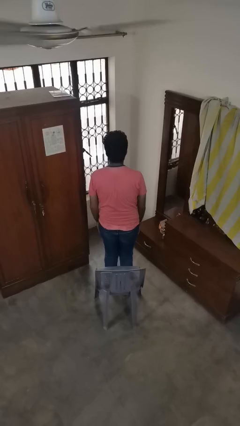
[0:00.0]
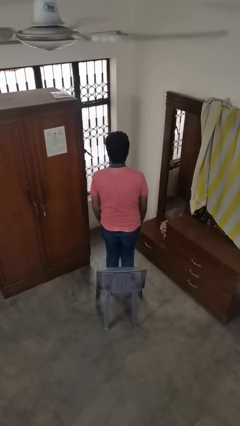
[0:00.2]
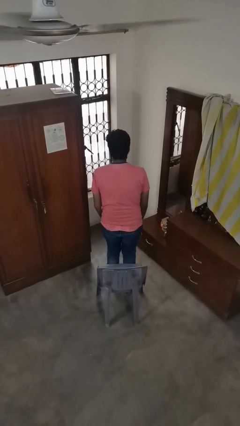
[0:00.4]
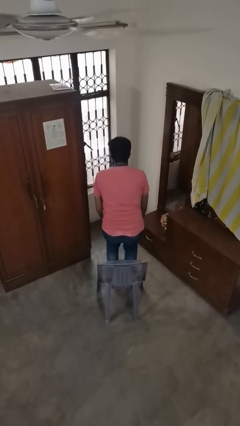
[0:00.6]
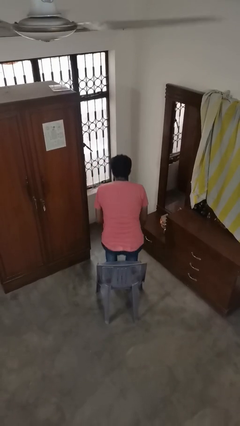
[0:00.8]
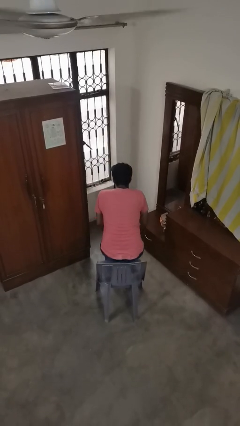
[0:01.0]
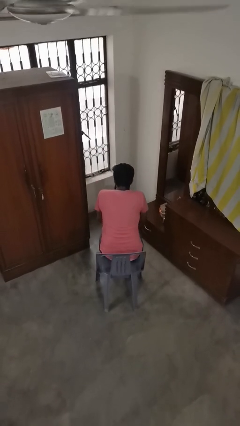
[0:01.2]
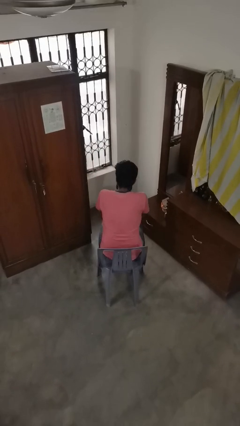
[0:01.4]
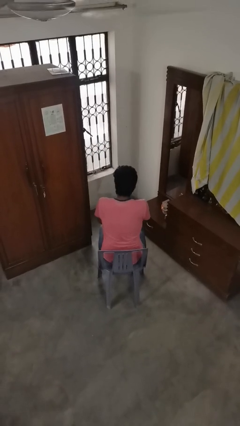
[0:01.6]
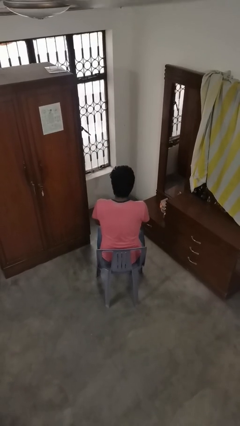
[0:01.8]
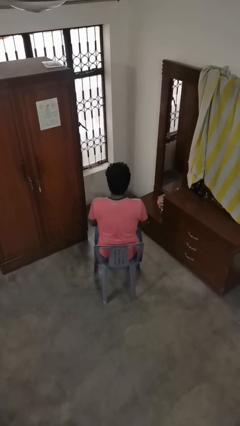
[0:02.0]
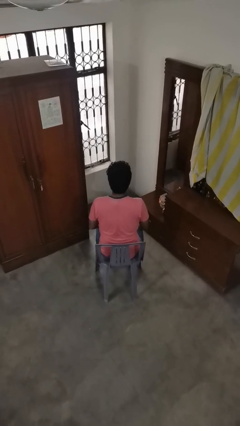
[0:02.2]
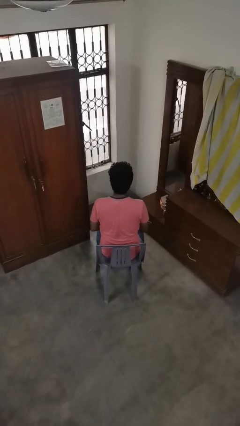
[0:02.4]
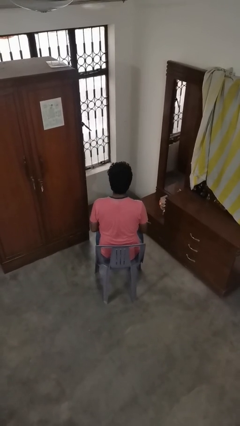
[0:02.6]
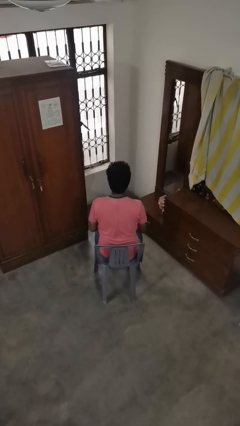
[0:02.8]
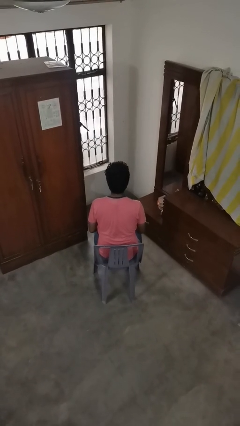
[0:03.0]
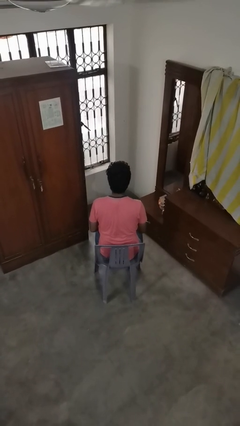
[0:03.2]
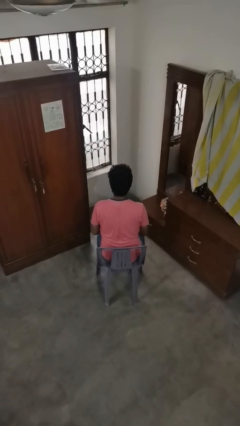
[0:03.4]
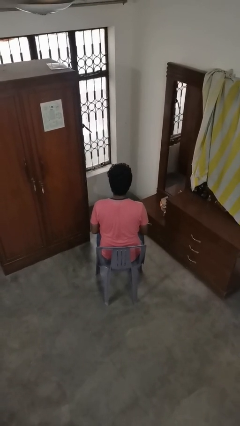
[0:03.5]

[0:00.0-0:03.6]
person sits down

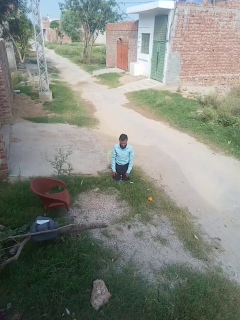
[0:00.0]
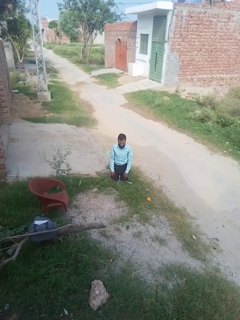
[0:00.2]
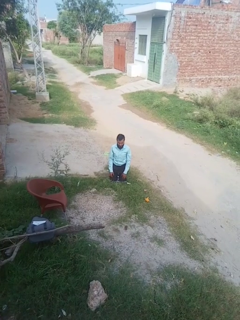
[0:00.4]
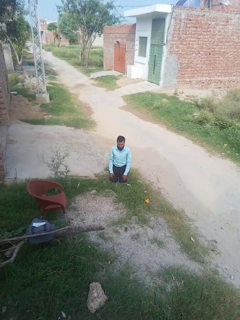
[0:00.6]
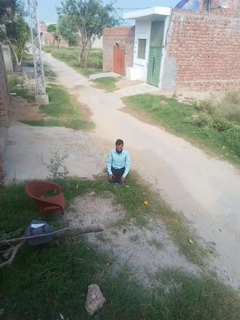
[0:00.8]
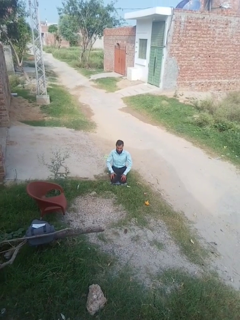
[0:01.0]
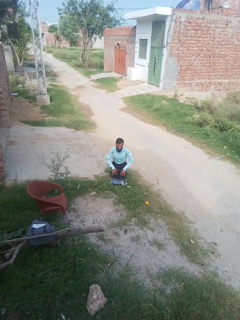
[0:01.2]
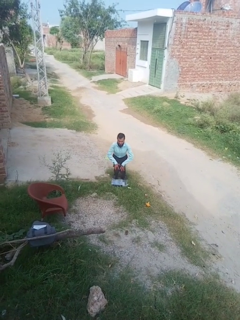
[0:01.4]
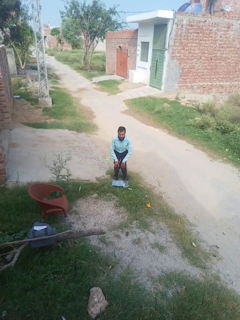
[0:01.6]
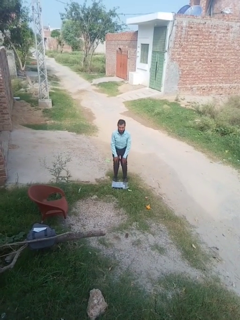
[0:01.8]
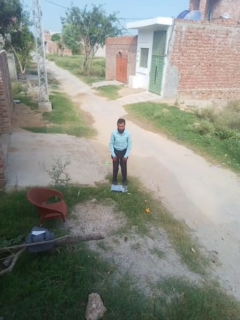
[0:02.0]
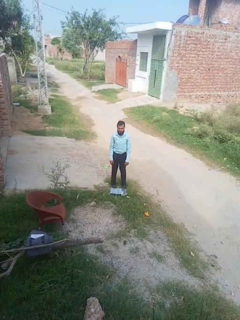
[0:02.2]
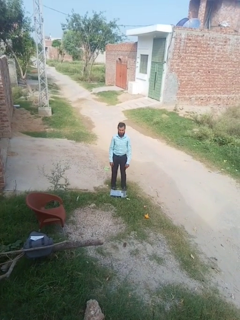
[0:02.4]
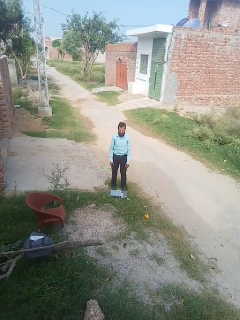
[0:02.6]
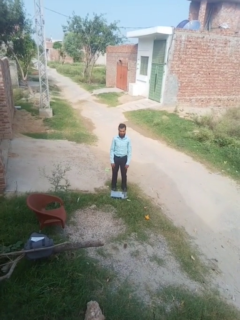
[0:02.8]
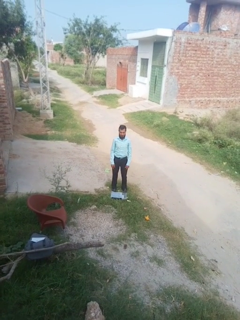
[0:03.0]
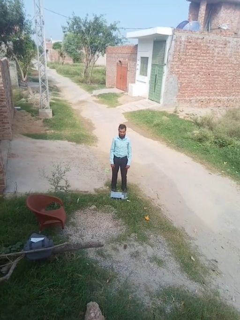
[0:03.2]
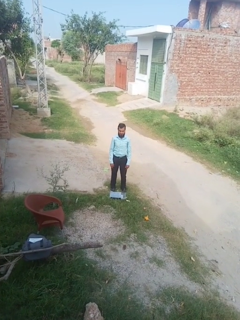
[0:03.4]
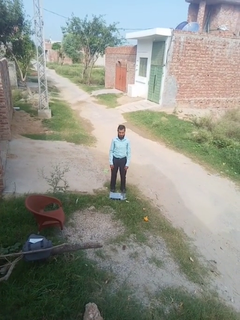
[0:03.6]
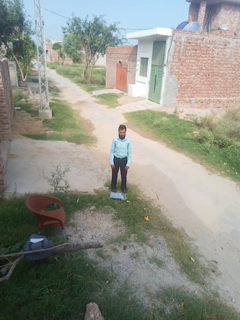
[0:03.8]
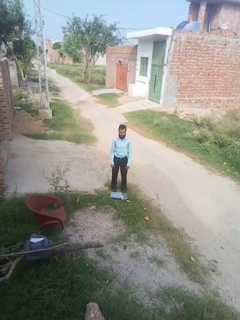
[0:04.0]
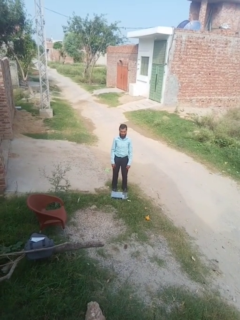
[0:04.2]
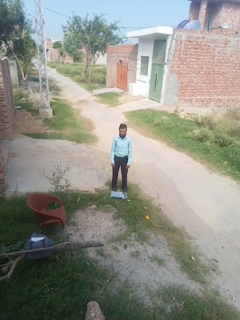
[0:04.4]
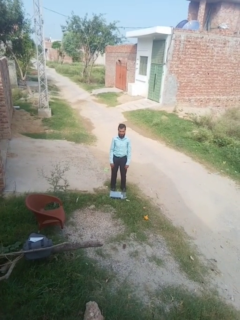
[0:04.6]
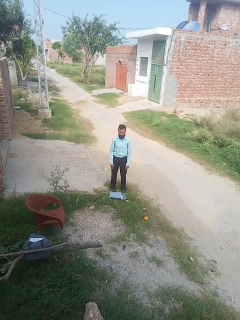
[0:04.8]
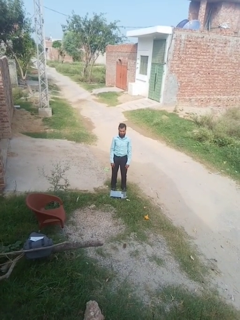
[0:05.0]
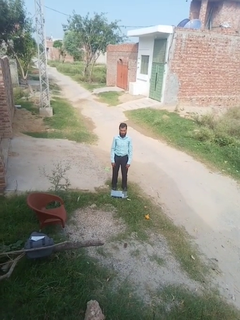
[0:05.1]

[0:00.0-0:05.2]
person stands up from floor

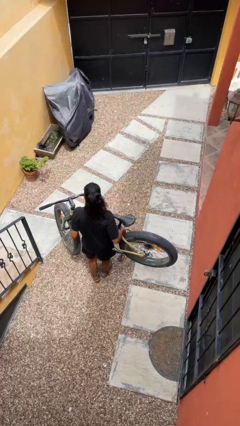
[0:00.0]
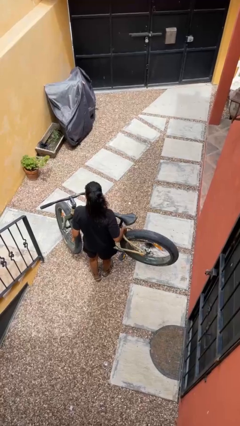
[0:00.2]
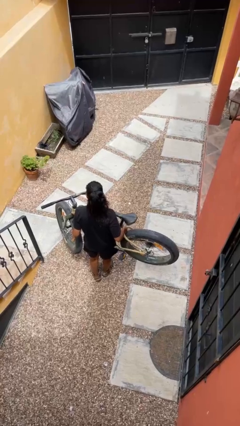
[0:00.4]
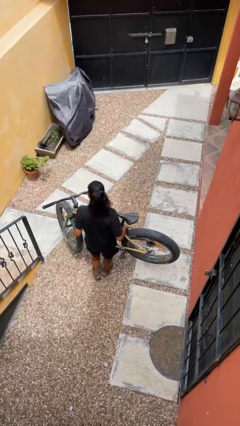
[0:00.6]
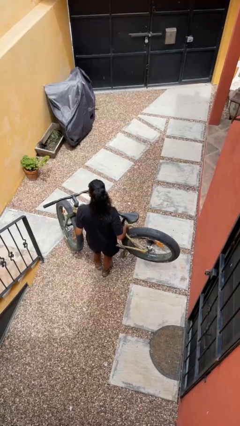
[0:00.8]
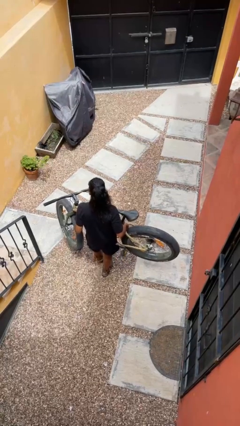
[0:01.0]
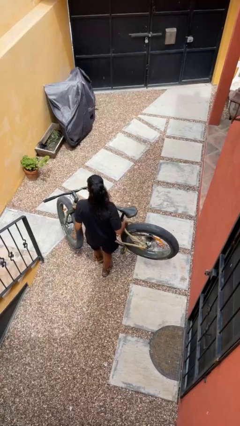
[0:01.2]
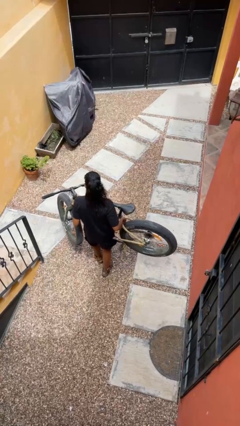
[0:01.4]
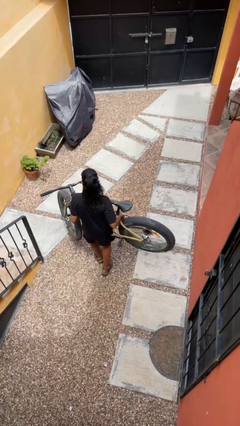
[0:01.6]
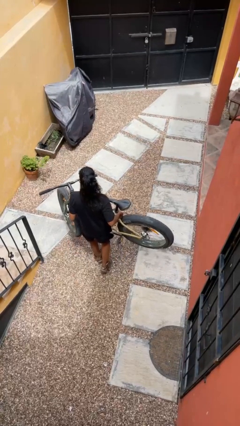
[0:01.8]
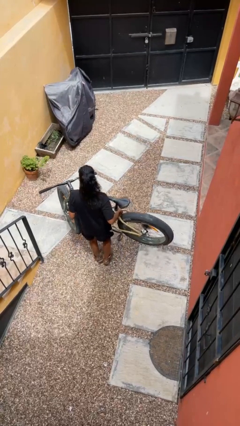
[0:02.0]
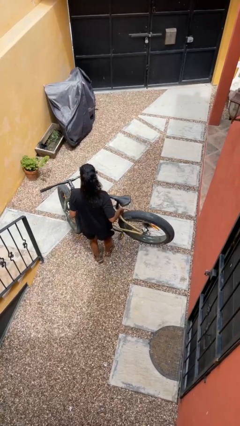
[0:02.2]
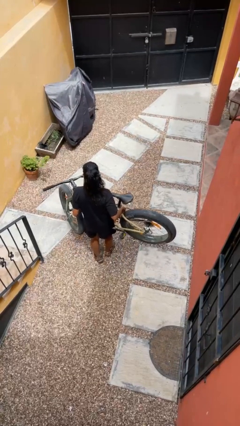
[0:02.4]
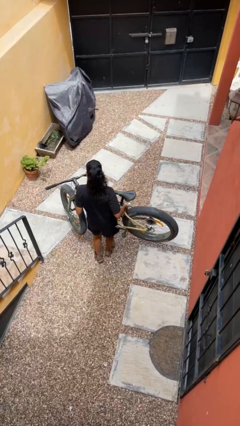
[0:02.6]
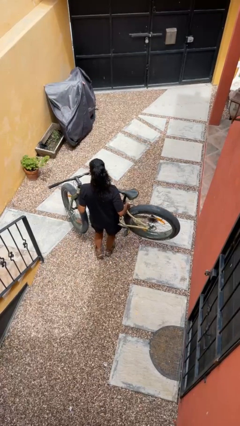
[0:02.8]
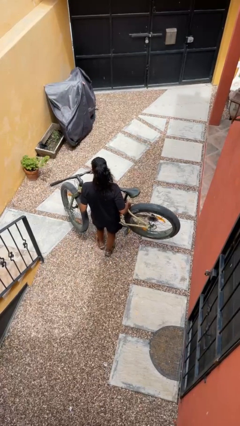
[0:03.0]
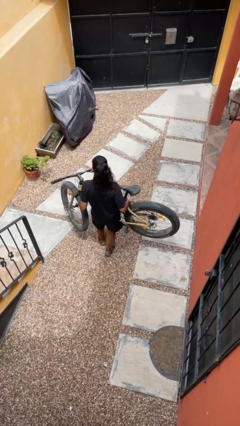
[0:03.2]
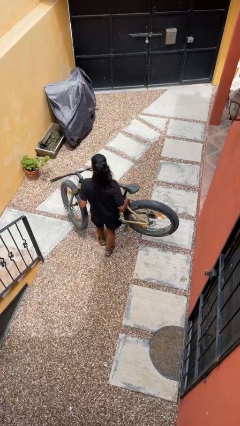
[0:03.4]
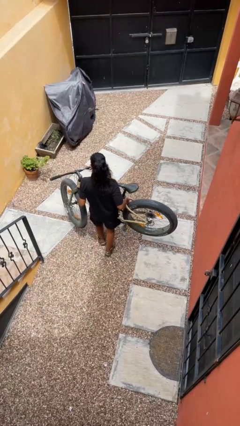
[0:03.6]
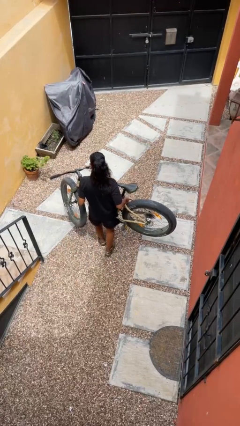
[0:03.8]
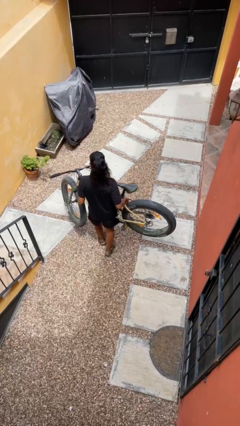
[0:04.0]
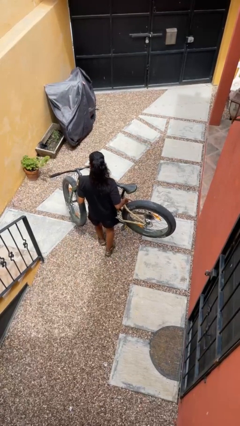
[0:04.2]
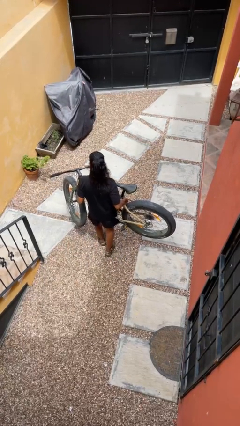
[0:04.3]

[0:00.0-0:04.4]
person carries bicycle

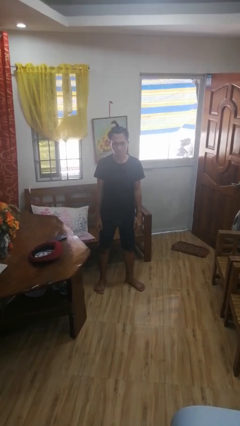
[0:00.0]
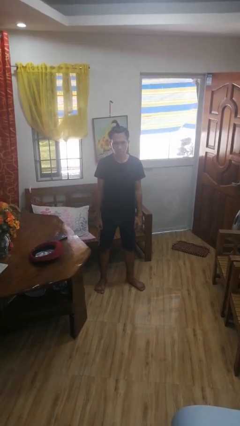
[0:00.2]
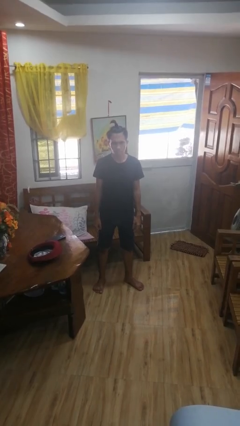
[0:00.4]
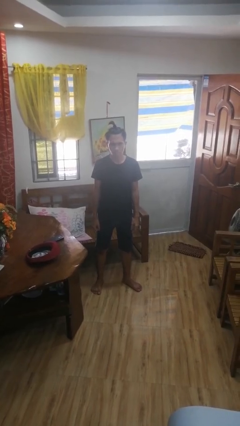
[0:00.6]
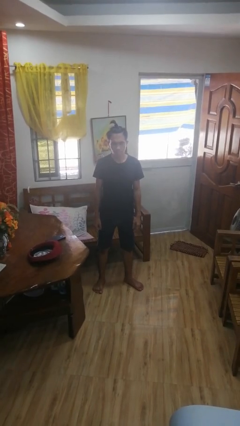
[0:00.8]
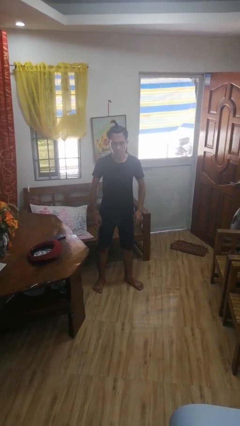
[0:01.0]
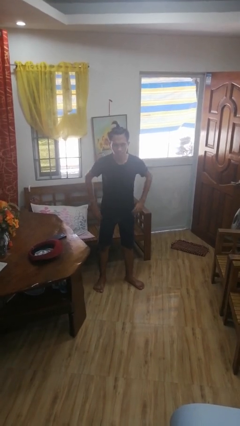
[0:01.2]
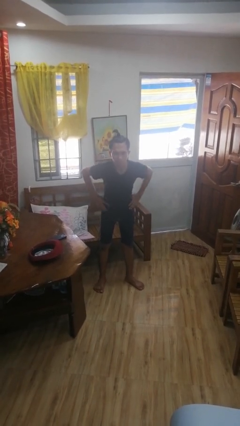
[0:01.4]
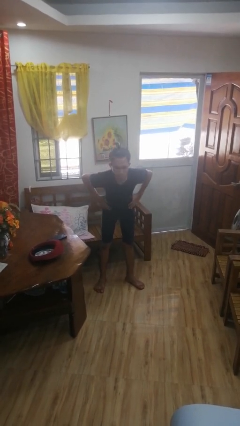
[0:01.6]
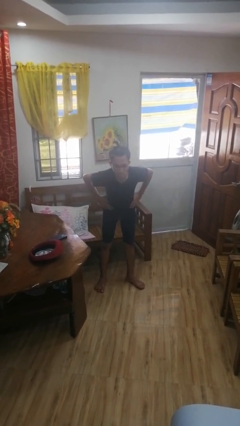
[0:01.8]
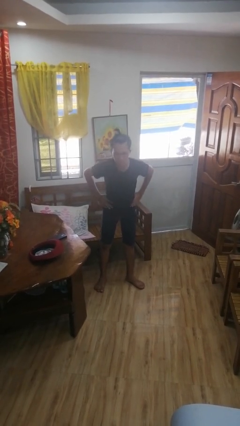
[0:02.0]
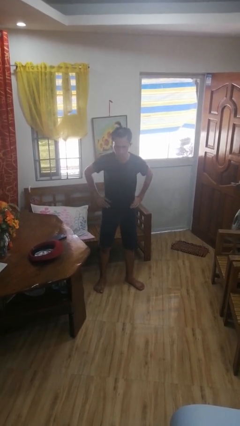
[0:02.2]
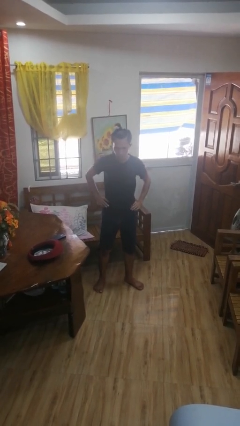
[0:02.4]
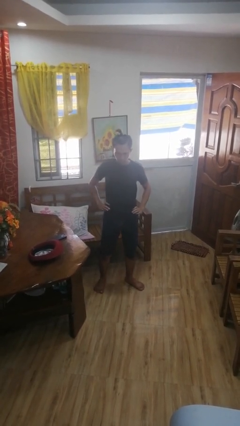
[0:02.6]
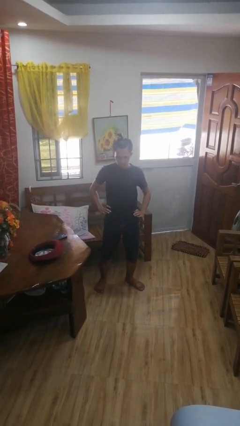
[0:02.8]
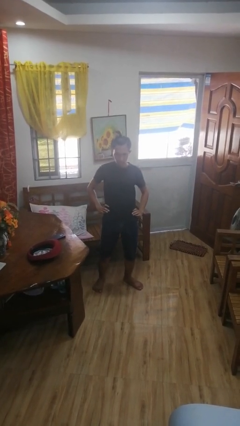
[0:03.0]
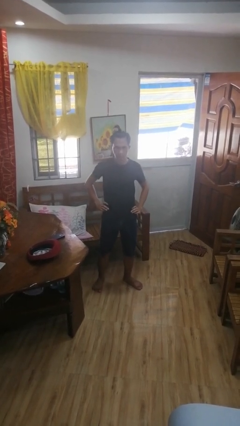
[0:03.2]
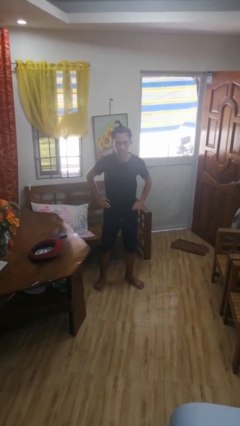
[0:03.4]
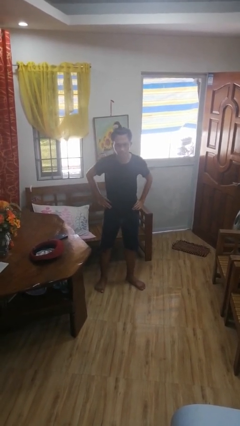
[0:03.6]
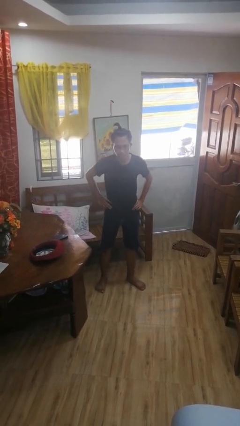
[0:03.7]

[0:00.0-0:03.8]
person wiggles hips

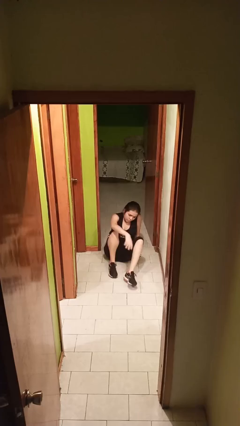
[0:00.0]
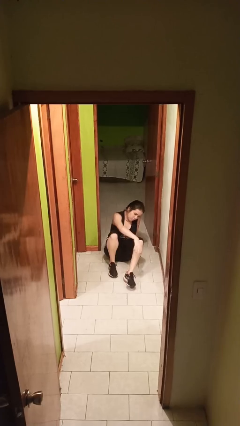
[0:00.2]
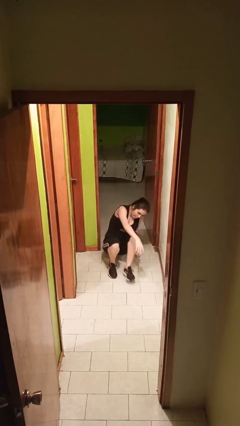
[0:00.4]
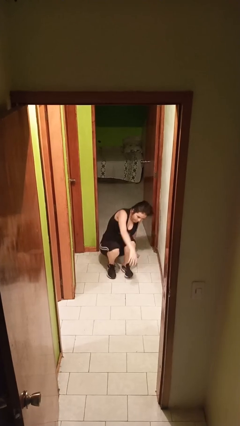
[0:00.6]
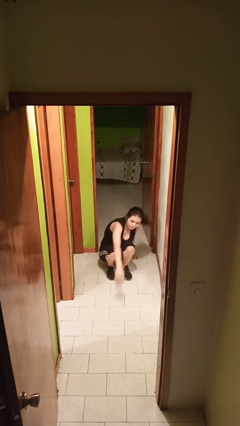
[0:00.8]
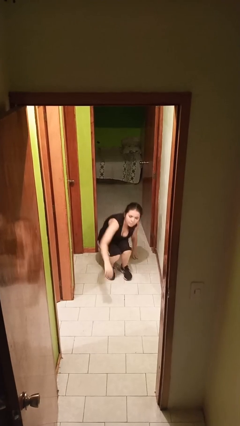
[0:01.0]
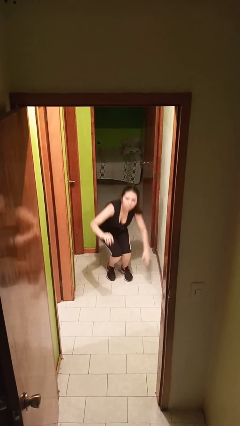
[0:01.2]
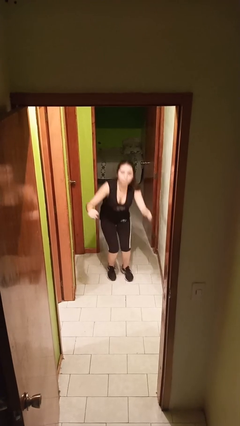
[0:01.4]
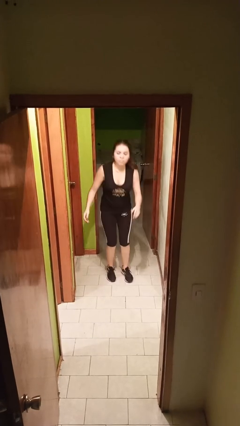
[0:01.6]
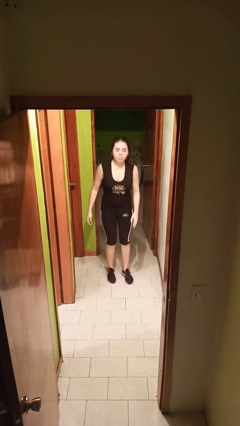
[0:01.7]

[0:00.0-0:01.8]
person stands up
